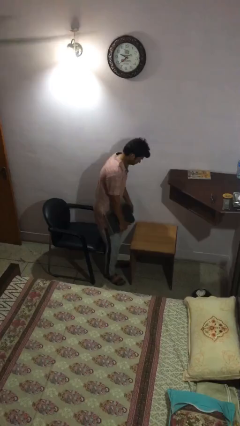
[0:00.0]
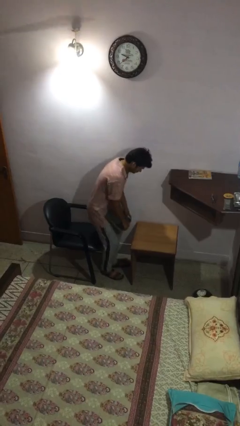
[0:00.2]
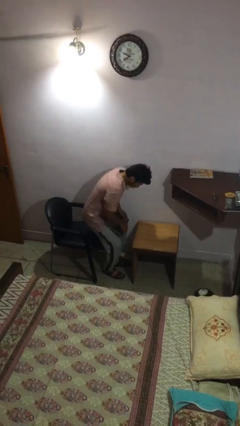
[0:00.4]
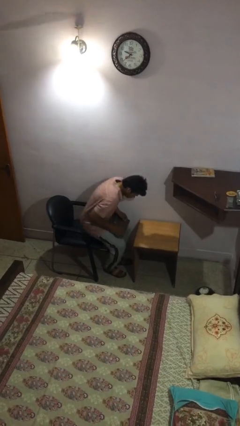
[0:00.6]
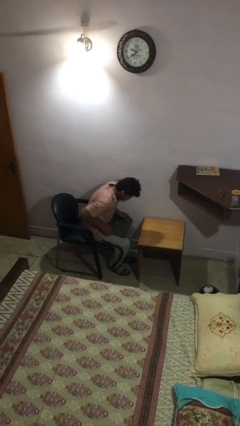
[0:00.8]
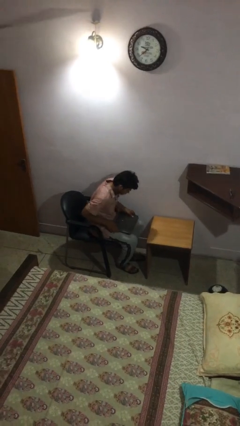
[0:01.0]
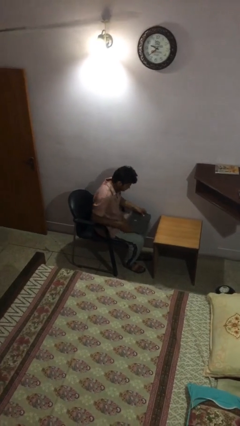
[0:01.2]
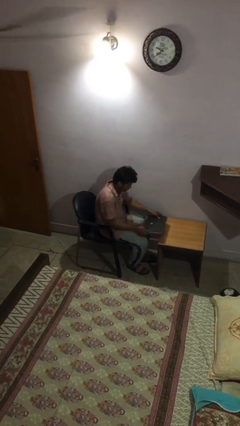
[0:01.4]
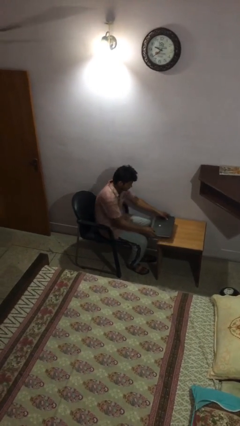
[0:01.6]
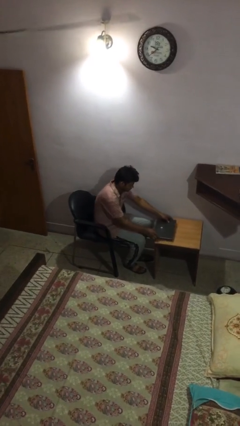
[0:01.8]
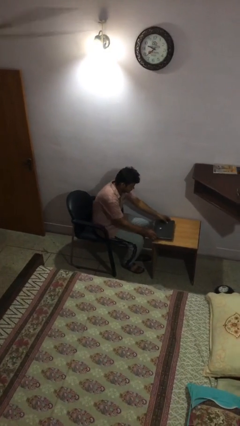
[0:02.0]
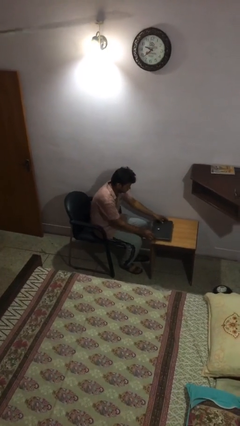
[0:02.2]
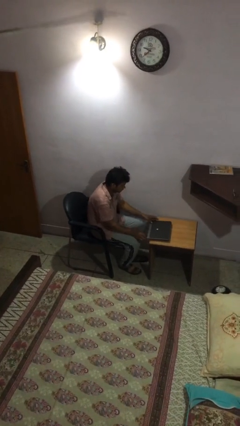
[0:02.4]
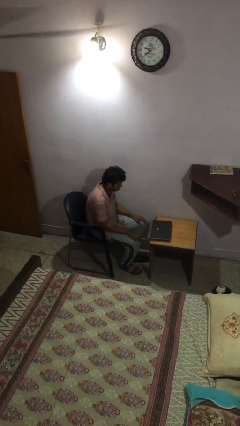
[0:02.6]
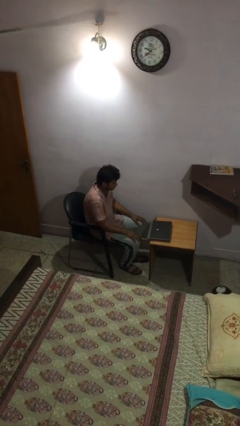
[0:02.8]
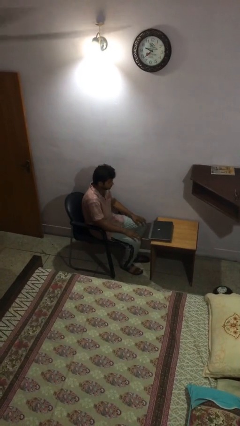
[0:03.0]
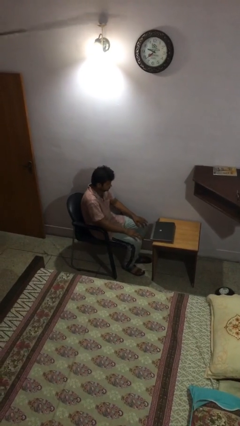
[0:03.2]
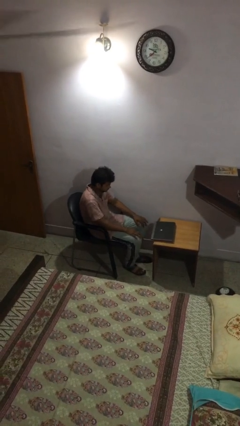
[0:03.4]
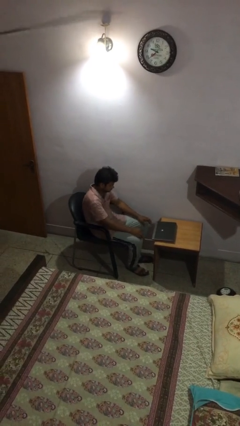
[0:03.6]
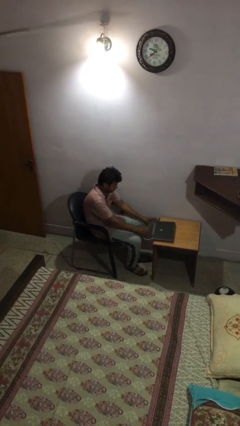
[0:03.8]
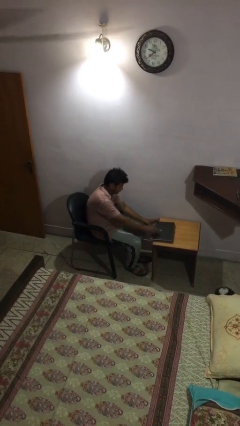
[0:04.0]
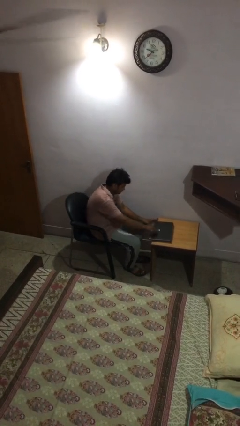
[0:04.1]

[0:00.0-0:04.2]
person sits down

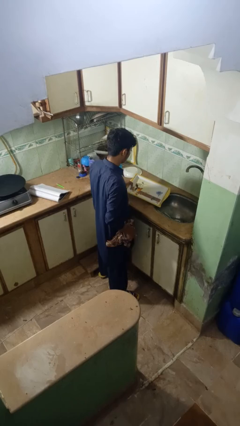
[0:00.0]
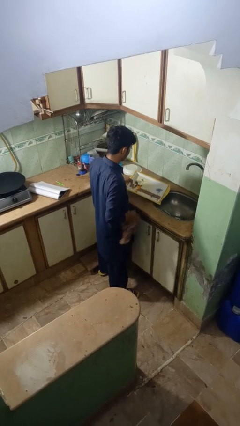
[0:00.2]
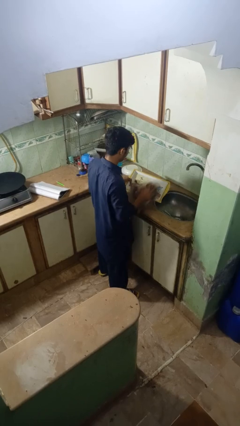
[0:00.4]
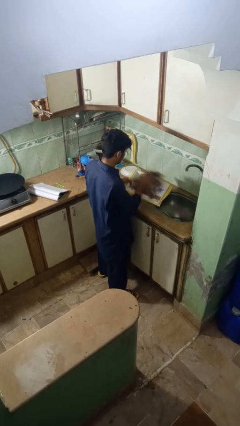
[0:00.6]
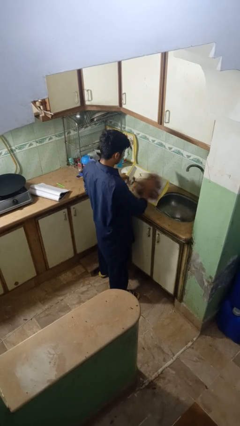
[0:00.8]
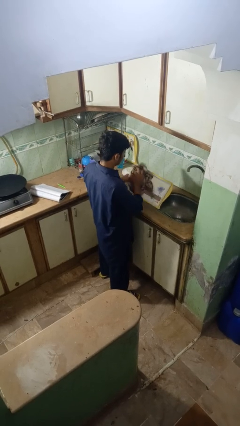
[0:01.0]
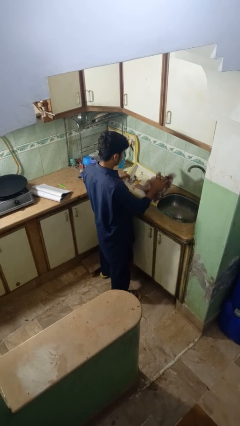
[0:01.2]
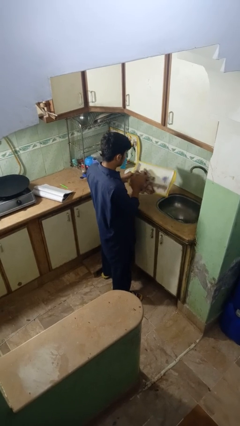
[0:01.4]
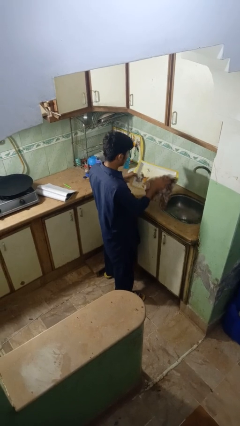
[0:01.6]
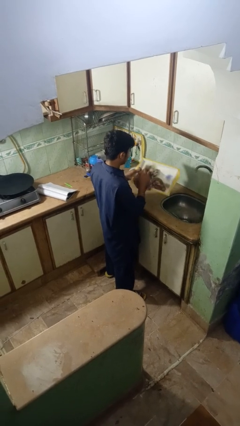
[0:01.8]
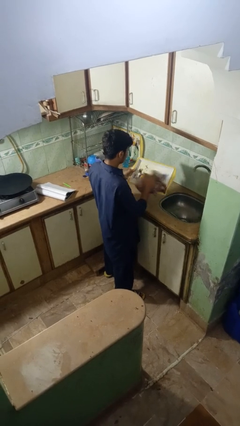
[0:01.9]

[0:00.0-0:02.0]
person dries dish

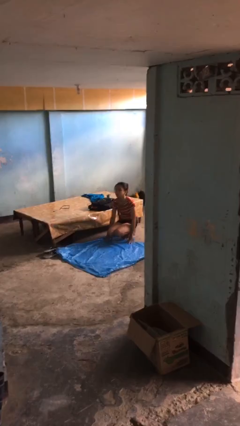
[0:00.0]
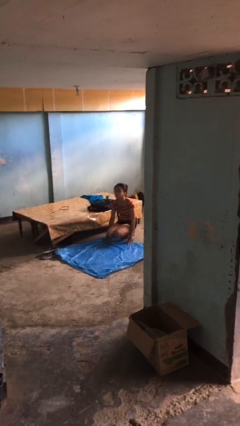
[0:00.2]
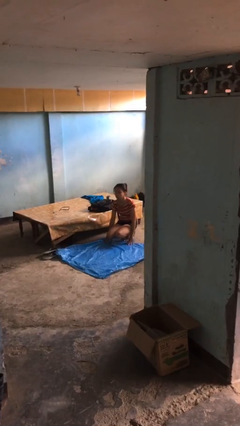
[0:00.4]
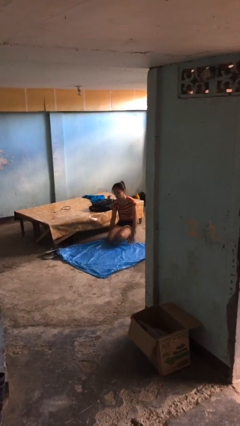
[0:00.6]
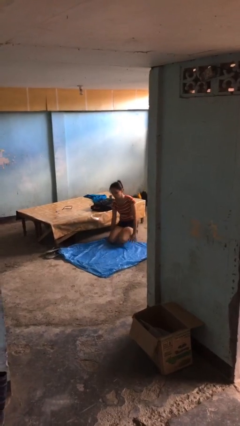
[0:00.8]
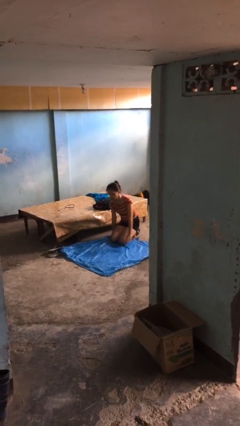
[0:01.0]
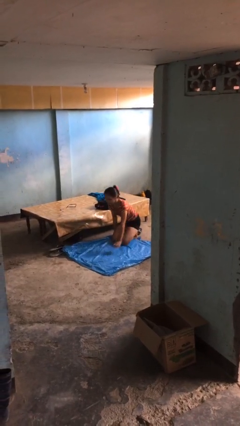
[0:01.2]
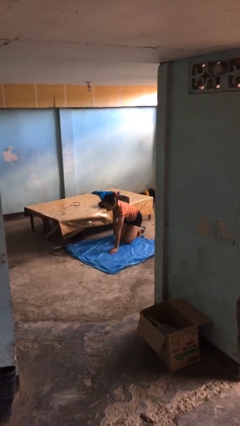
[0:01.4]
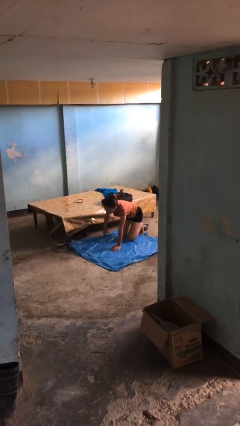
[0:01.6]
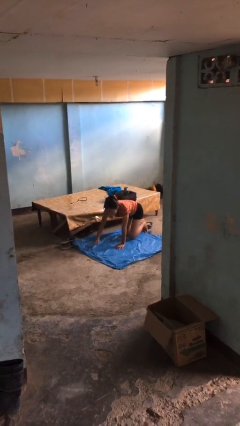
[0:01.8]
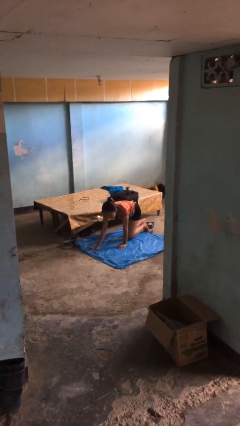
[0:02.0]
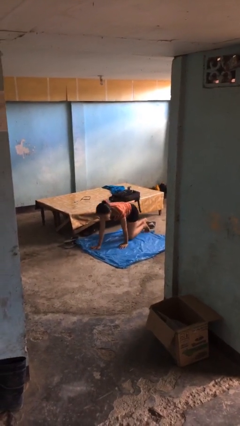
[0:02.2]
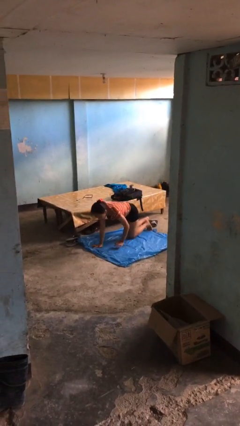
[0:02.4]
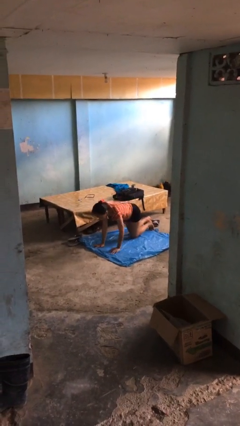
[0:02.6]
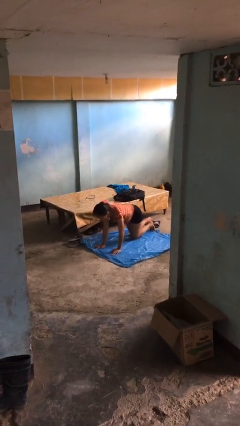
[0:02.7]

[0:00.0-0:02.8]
person crawls

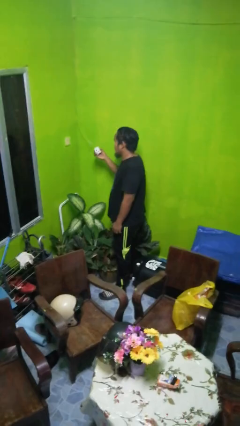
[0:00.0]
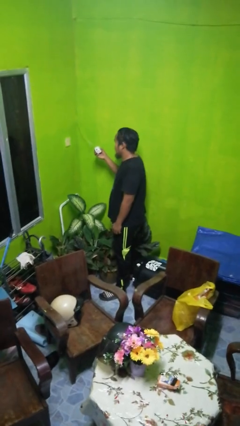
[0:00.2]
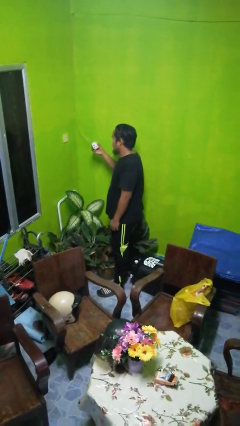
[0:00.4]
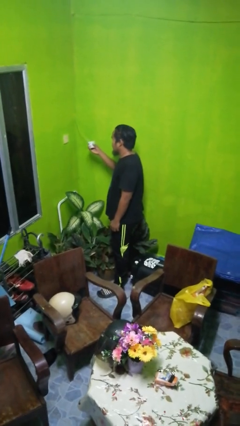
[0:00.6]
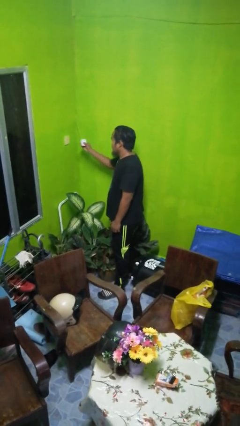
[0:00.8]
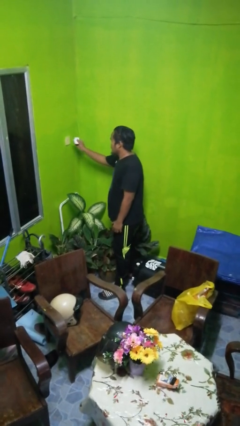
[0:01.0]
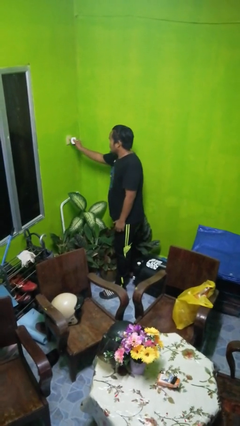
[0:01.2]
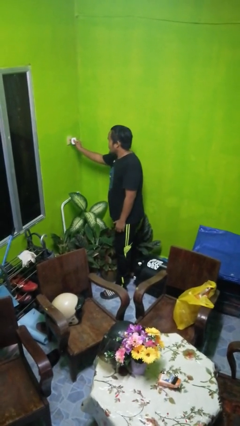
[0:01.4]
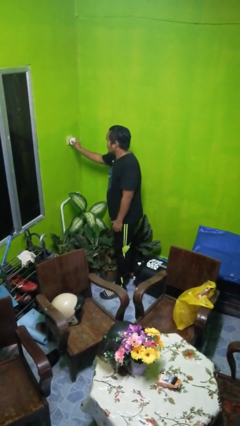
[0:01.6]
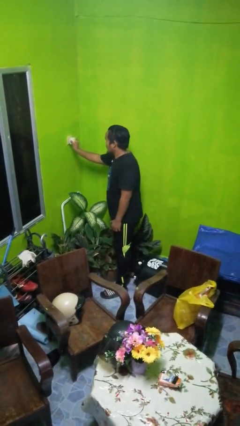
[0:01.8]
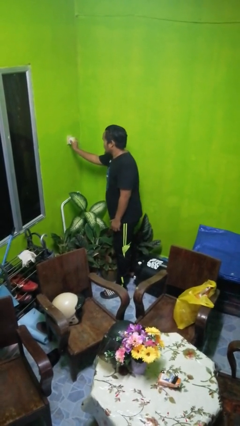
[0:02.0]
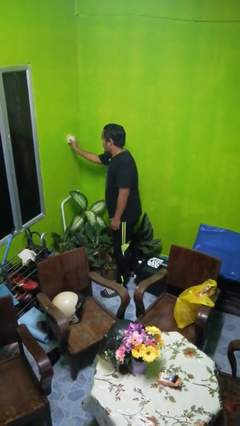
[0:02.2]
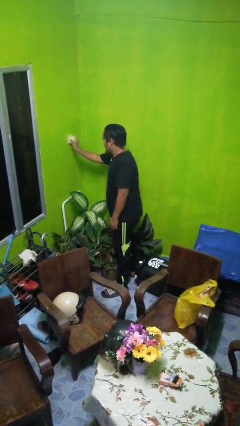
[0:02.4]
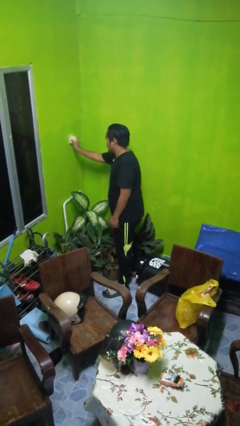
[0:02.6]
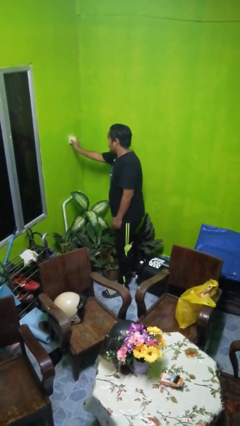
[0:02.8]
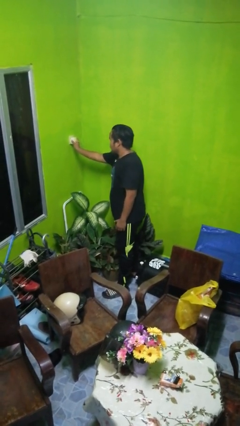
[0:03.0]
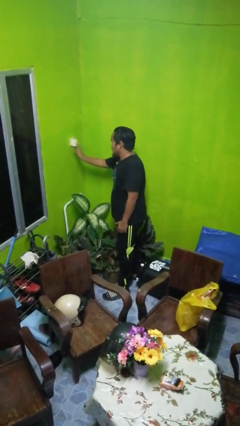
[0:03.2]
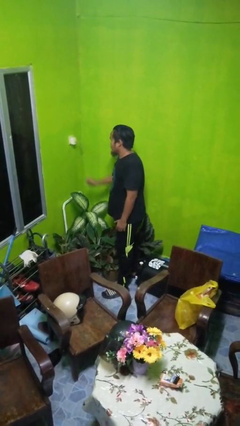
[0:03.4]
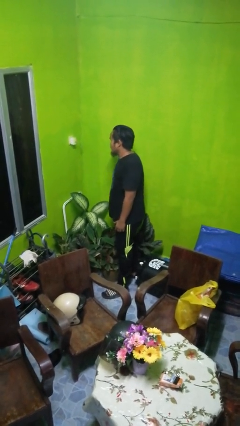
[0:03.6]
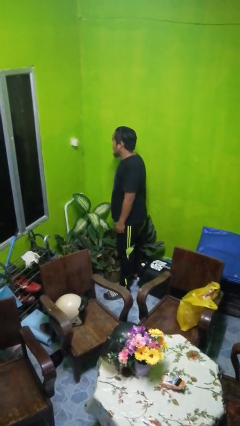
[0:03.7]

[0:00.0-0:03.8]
person plugs into electrical socket

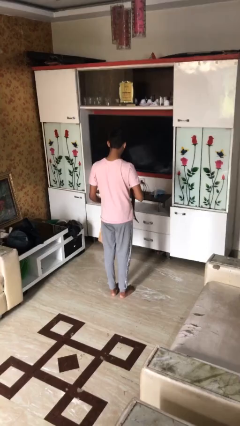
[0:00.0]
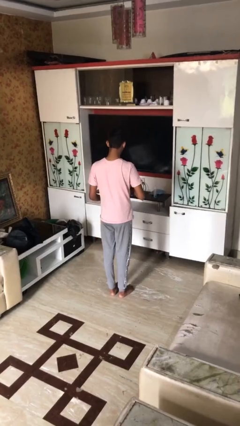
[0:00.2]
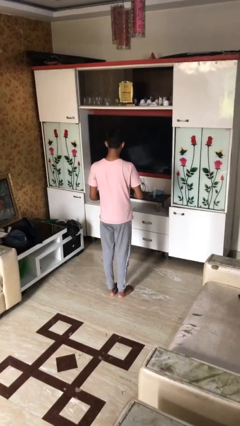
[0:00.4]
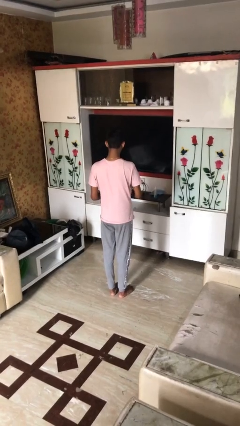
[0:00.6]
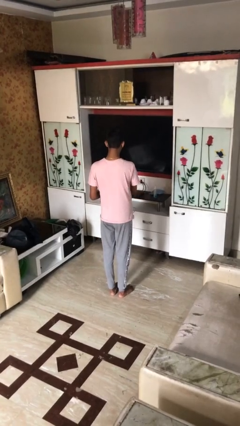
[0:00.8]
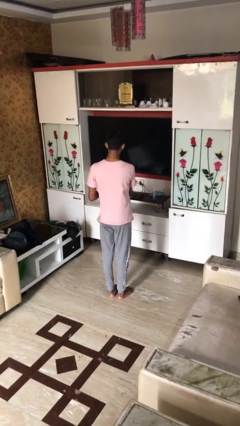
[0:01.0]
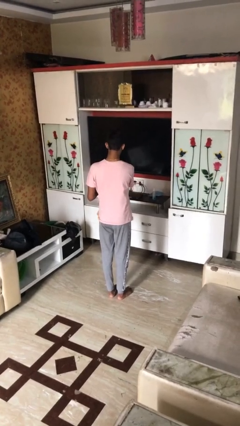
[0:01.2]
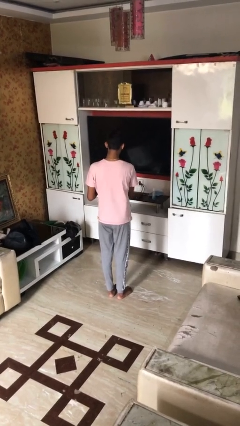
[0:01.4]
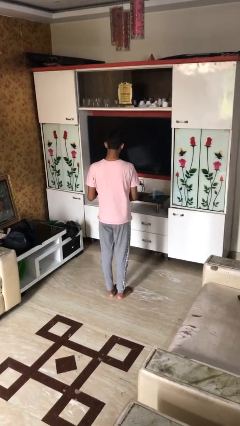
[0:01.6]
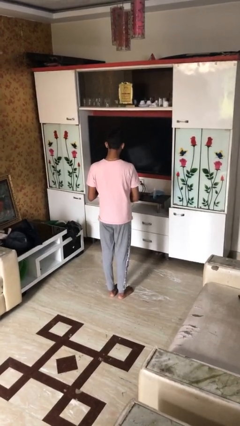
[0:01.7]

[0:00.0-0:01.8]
person puts object into bag

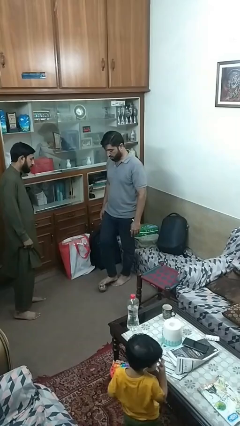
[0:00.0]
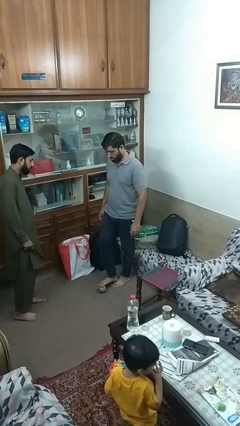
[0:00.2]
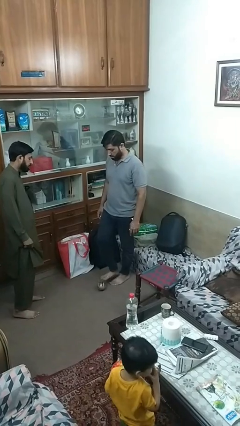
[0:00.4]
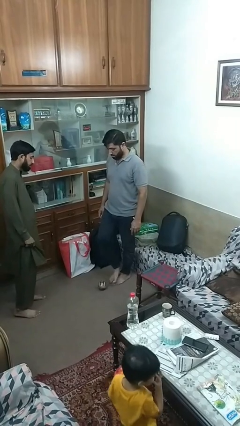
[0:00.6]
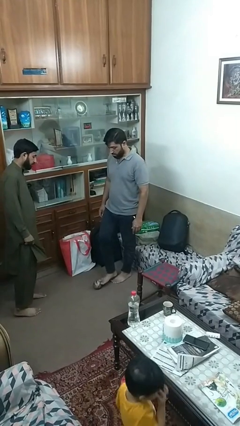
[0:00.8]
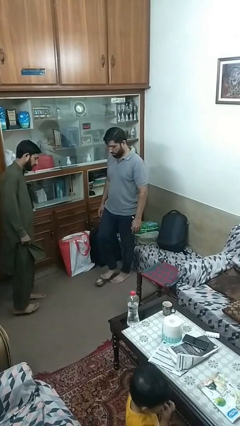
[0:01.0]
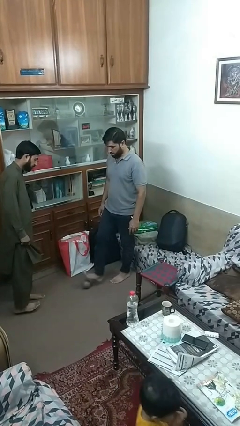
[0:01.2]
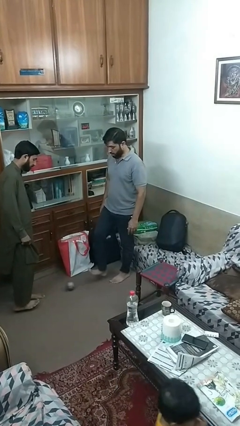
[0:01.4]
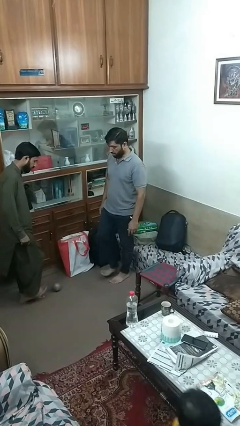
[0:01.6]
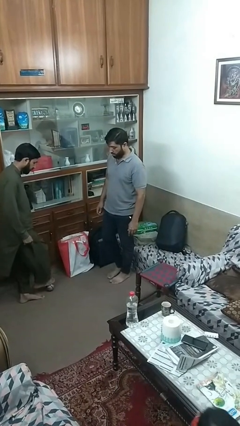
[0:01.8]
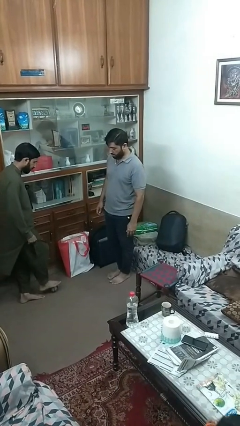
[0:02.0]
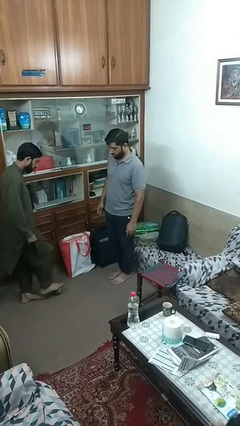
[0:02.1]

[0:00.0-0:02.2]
person kicks object to person

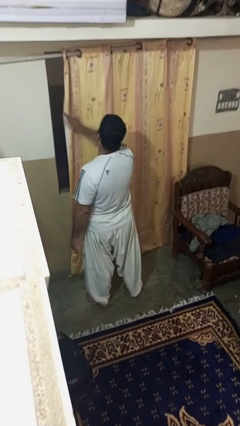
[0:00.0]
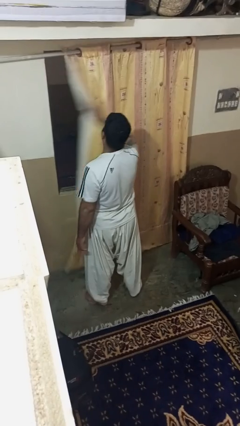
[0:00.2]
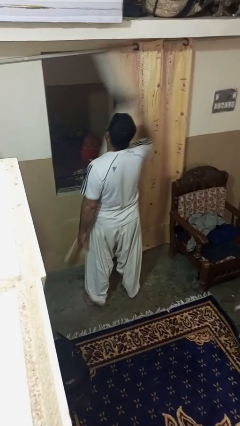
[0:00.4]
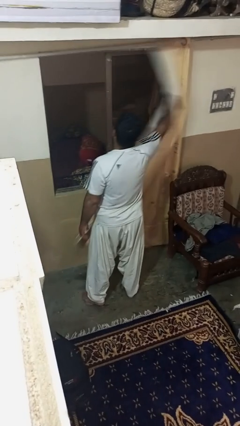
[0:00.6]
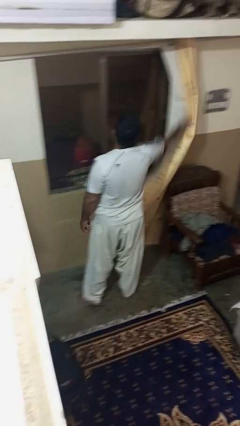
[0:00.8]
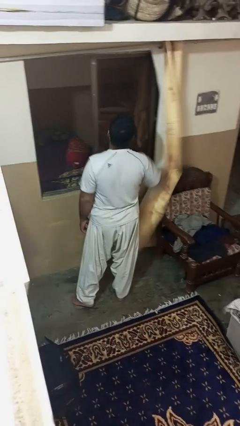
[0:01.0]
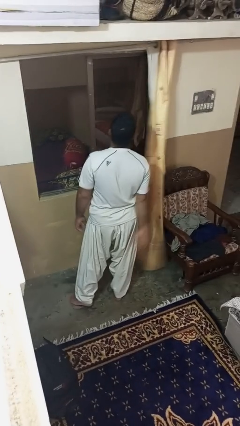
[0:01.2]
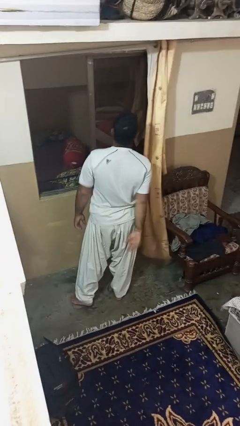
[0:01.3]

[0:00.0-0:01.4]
person opens curtains
